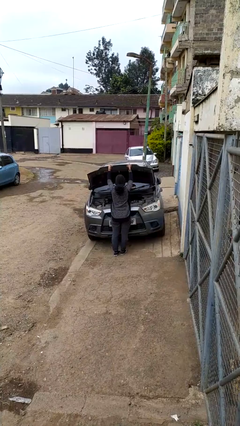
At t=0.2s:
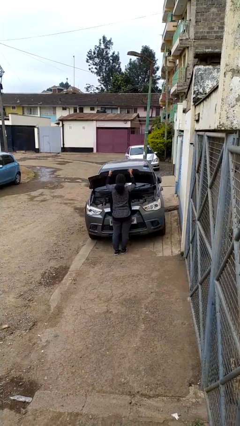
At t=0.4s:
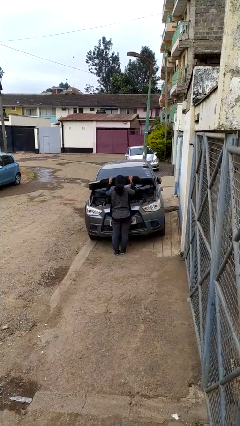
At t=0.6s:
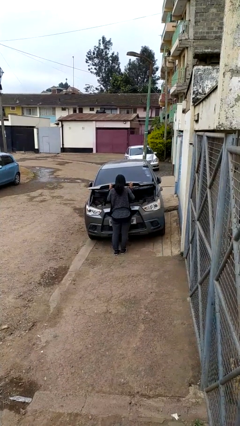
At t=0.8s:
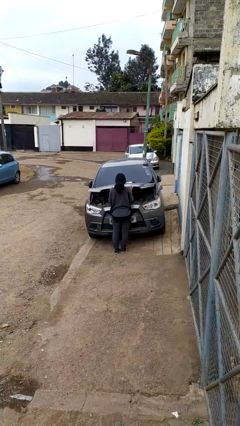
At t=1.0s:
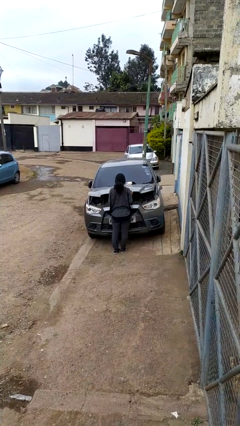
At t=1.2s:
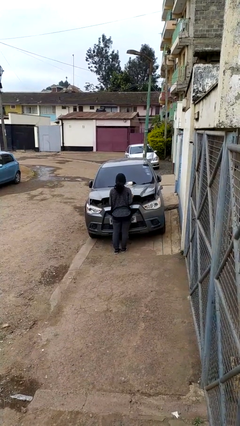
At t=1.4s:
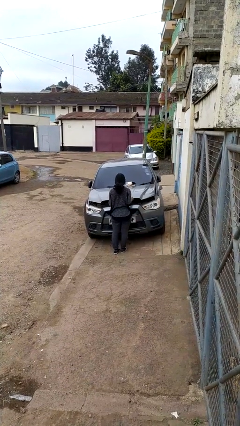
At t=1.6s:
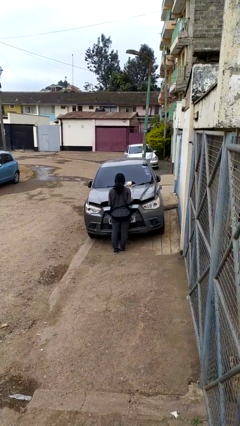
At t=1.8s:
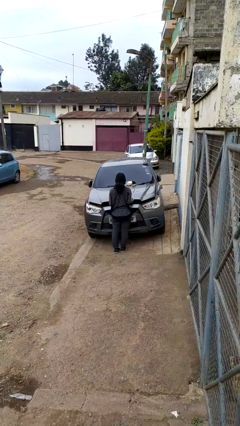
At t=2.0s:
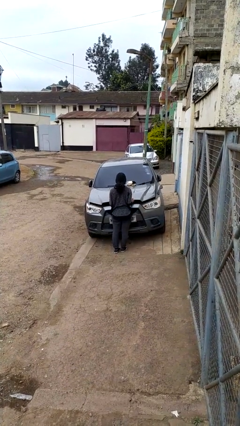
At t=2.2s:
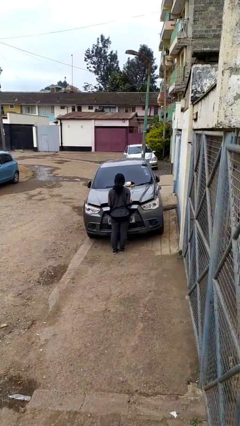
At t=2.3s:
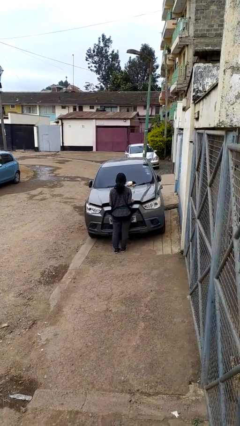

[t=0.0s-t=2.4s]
person closes car hood

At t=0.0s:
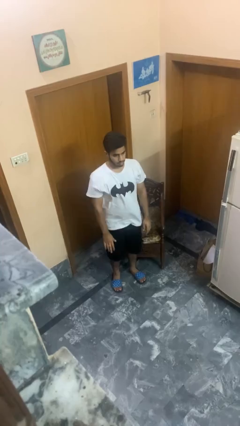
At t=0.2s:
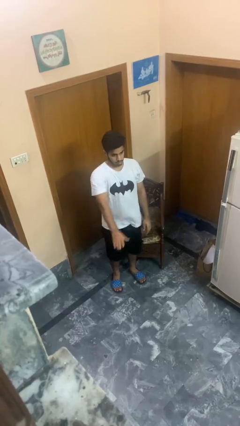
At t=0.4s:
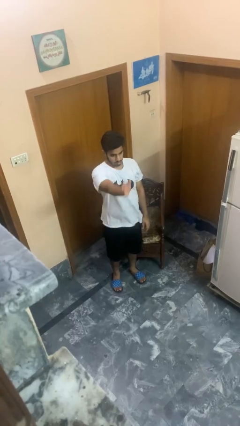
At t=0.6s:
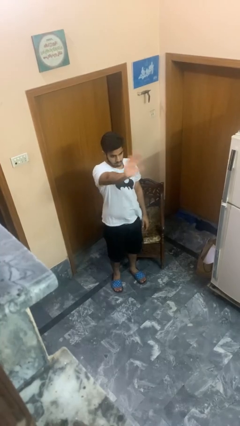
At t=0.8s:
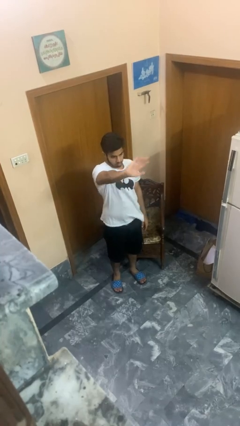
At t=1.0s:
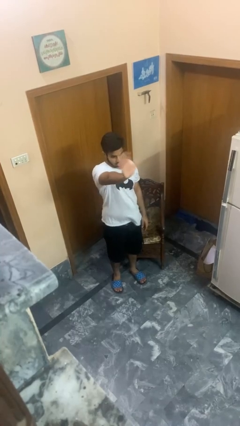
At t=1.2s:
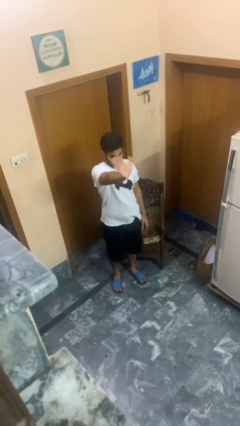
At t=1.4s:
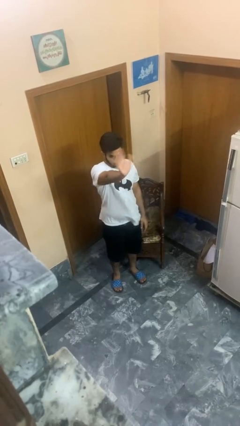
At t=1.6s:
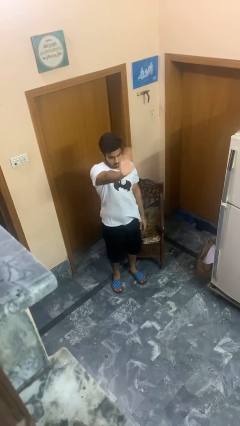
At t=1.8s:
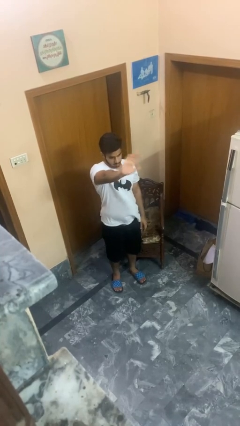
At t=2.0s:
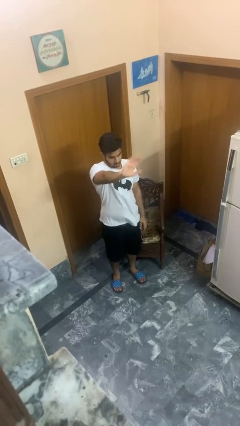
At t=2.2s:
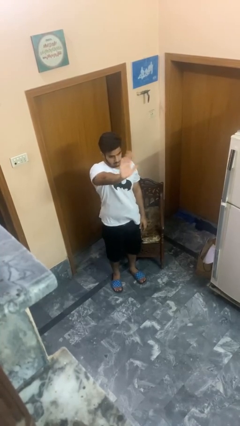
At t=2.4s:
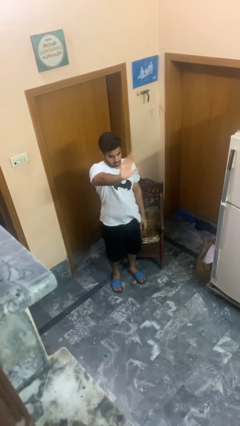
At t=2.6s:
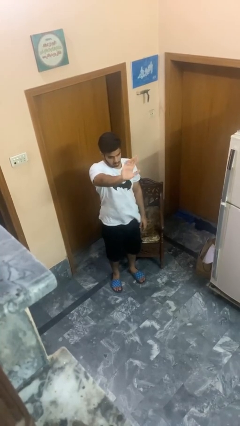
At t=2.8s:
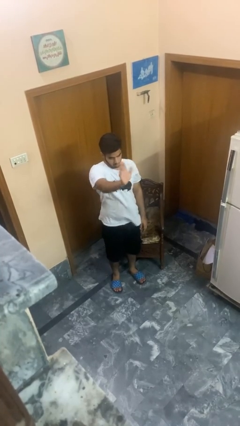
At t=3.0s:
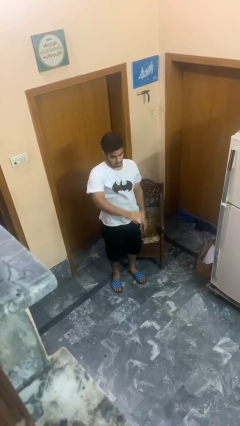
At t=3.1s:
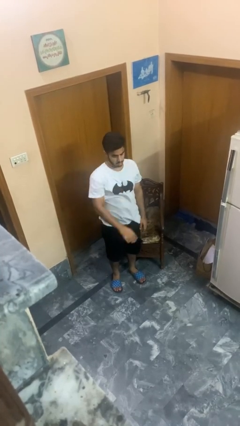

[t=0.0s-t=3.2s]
person waves at person

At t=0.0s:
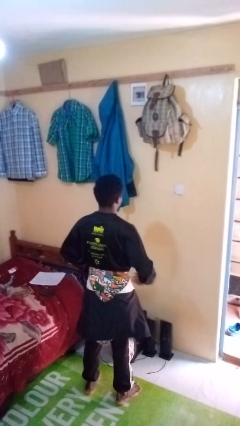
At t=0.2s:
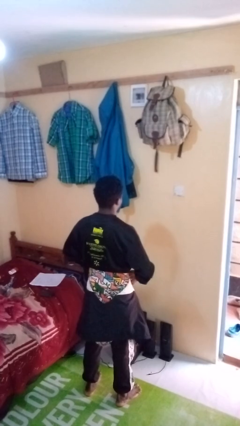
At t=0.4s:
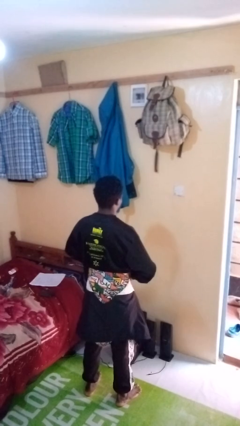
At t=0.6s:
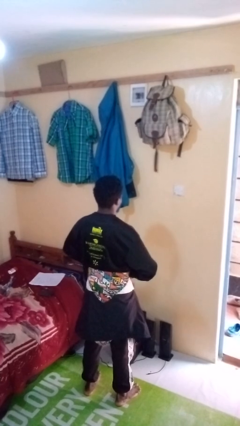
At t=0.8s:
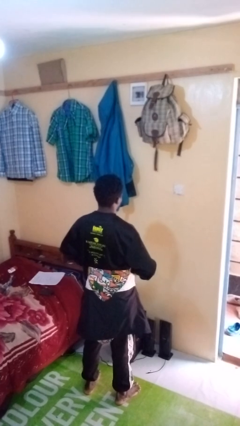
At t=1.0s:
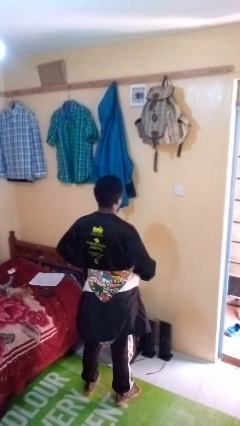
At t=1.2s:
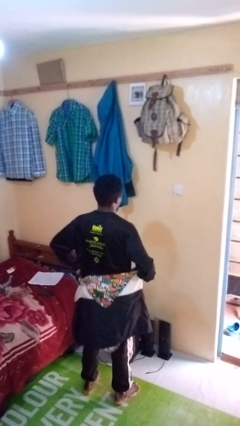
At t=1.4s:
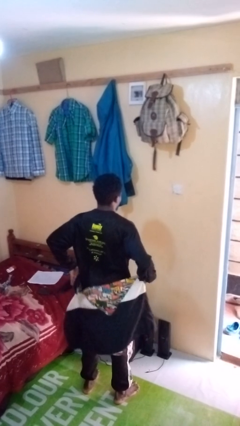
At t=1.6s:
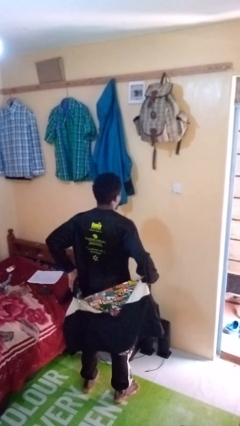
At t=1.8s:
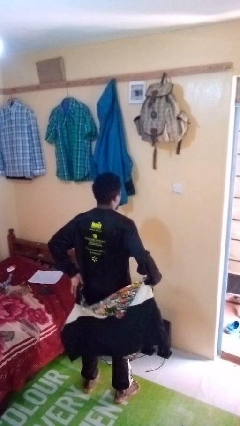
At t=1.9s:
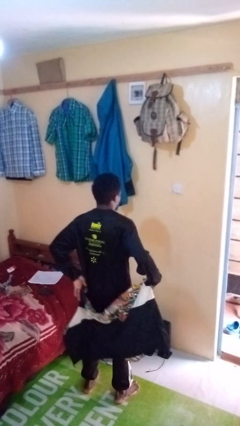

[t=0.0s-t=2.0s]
person unties jacket around waist

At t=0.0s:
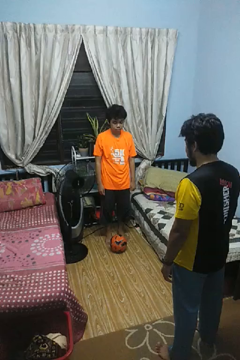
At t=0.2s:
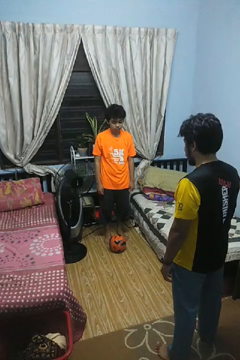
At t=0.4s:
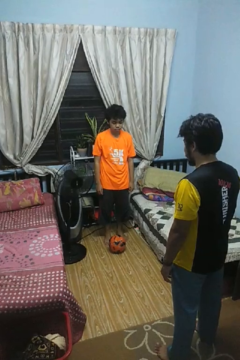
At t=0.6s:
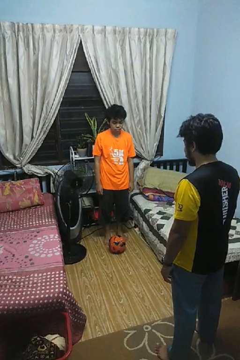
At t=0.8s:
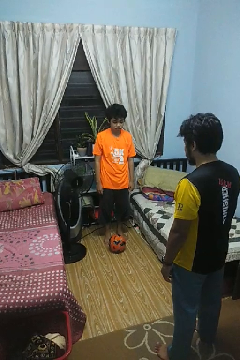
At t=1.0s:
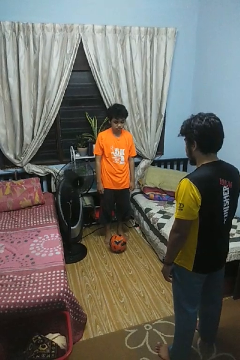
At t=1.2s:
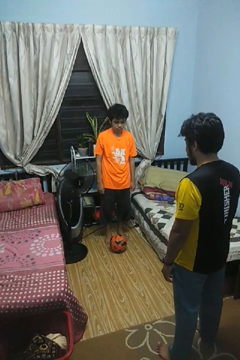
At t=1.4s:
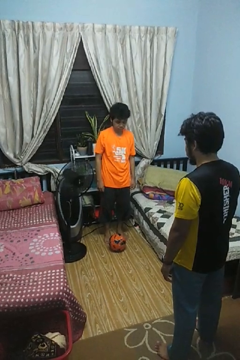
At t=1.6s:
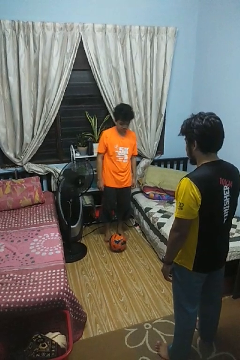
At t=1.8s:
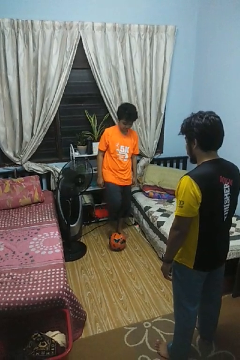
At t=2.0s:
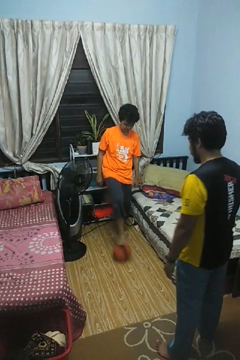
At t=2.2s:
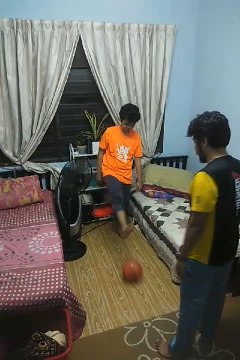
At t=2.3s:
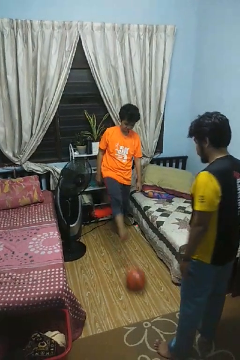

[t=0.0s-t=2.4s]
person kicks object to person

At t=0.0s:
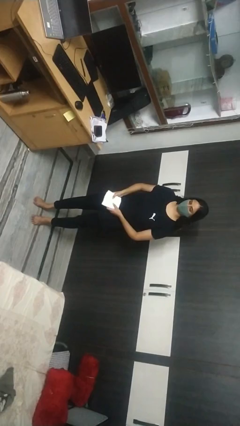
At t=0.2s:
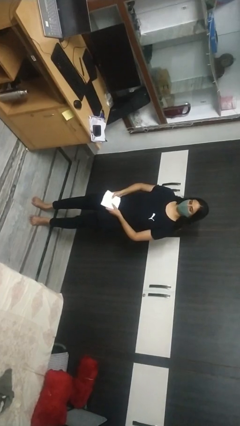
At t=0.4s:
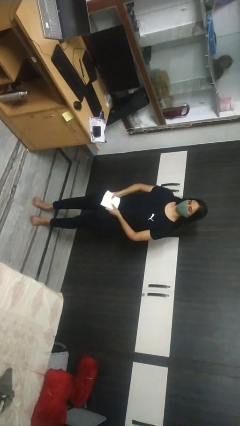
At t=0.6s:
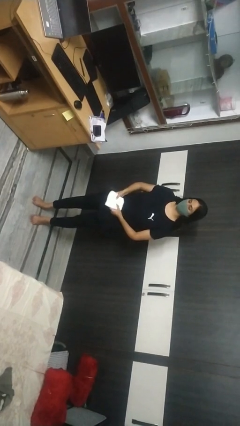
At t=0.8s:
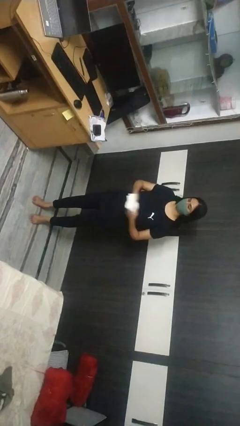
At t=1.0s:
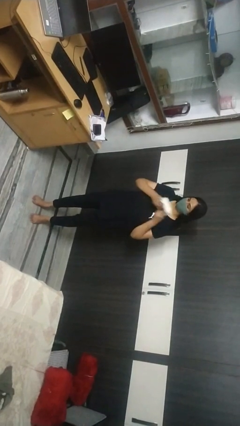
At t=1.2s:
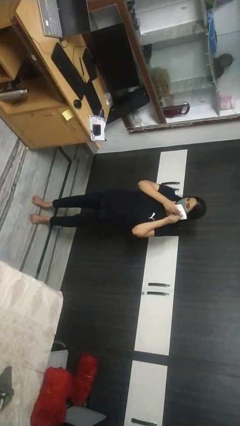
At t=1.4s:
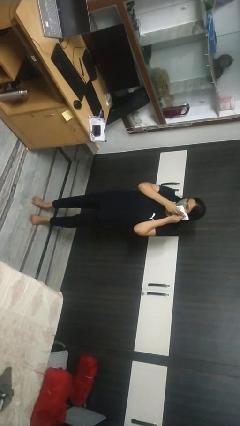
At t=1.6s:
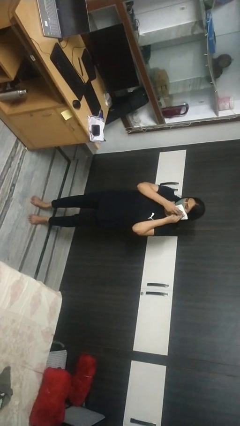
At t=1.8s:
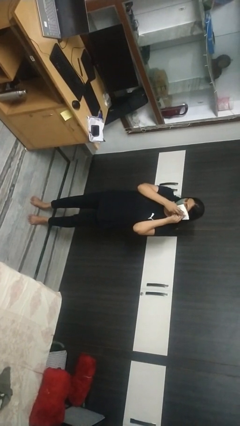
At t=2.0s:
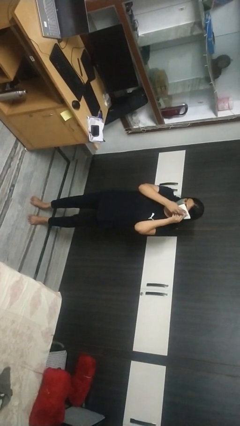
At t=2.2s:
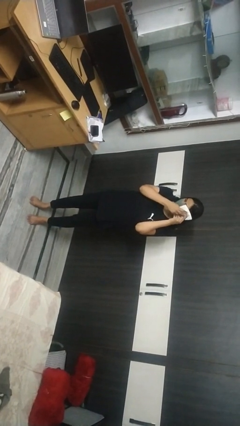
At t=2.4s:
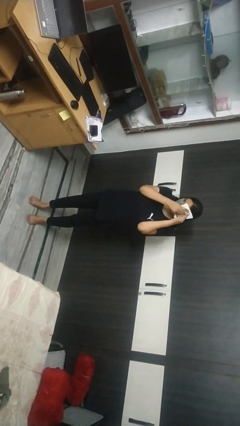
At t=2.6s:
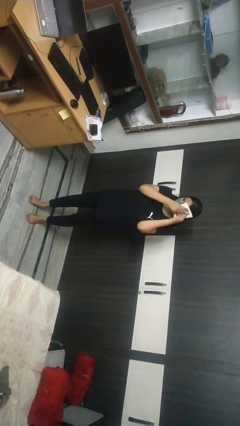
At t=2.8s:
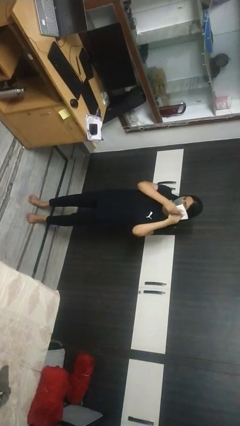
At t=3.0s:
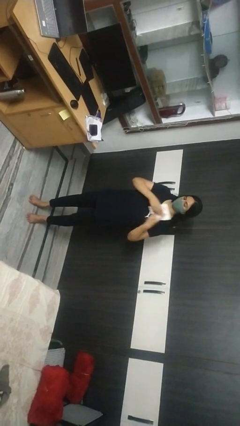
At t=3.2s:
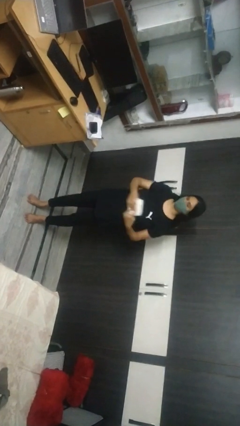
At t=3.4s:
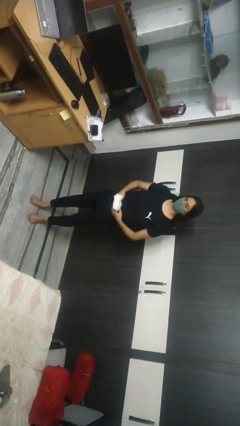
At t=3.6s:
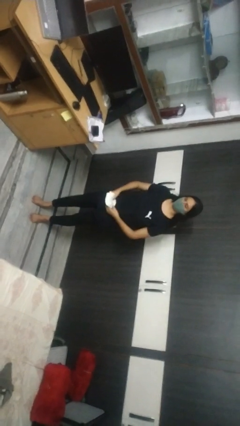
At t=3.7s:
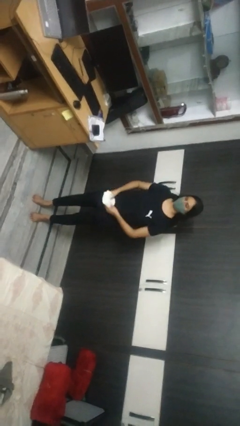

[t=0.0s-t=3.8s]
person wipes mouth with napkin
